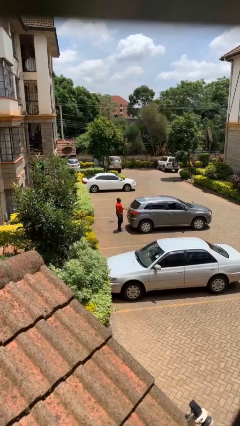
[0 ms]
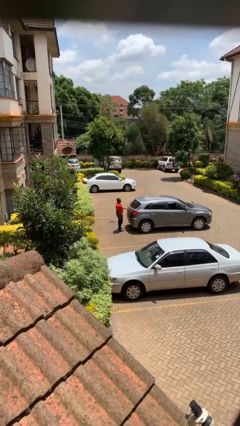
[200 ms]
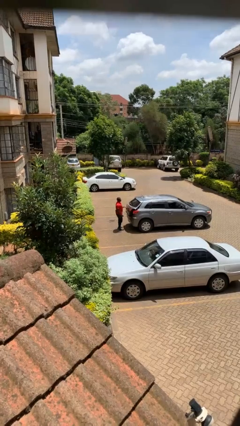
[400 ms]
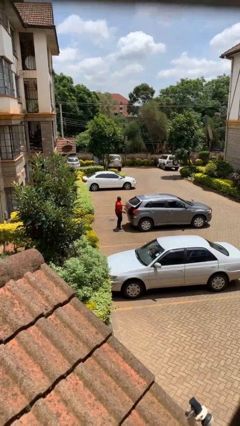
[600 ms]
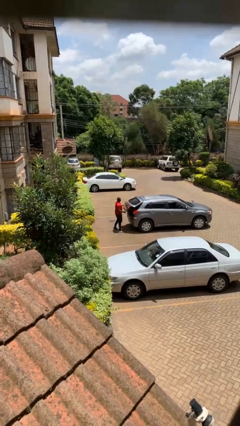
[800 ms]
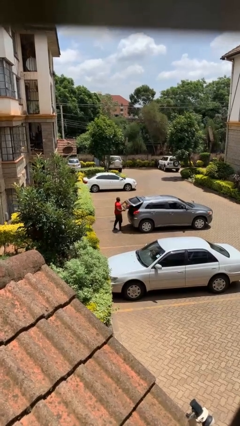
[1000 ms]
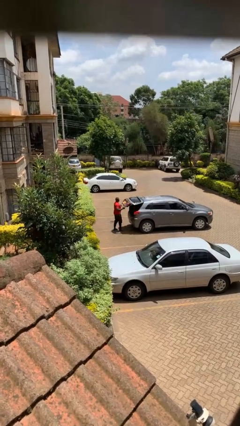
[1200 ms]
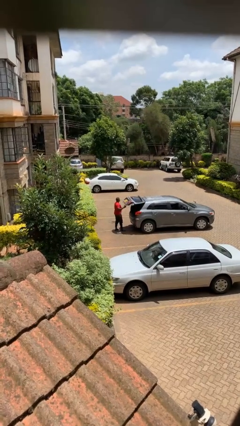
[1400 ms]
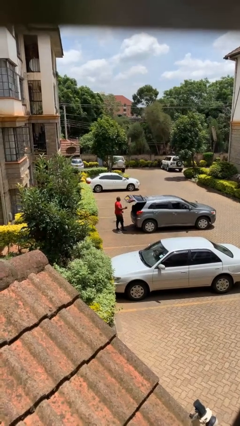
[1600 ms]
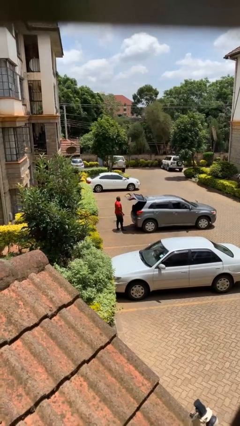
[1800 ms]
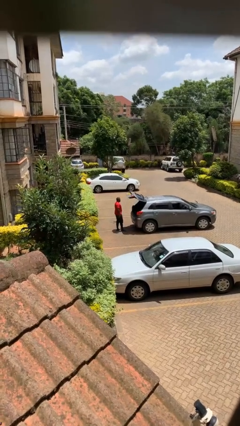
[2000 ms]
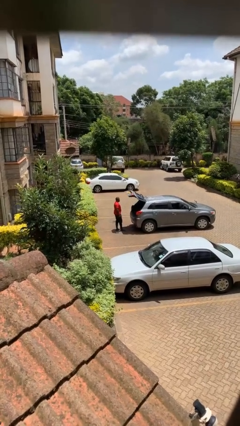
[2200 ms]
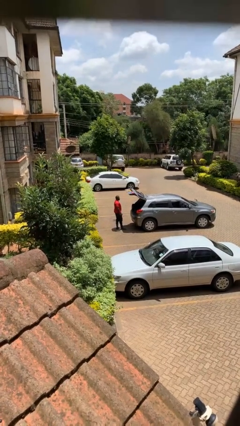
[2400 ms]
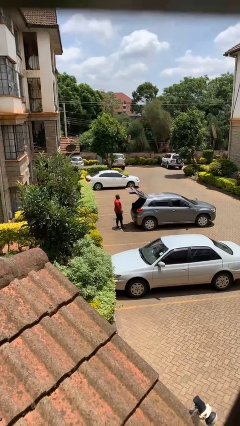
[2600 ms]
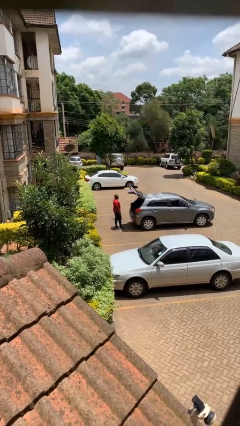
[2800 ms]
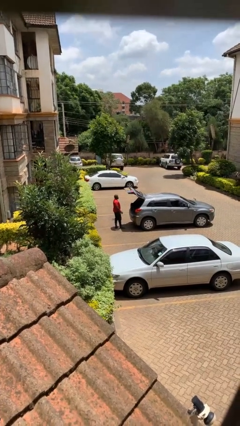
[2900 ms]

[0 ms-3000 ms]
person opens car trunk

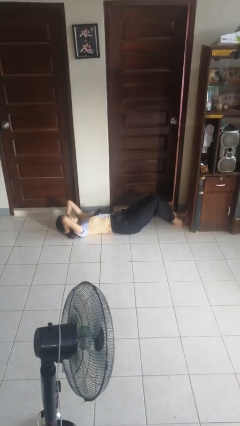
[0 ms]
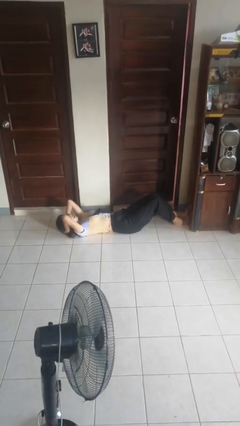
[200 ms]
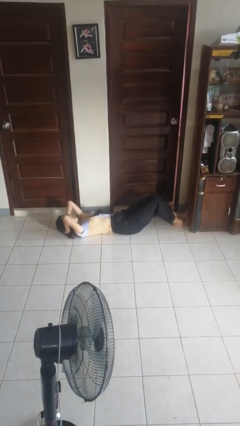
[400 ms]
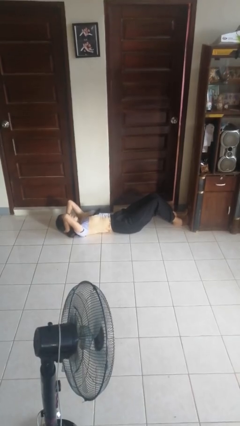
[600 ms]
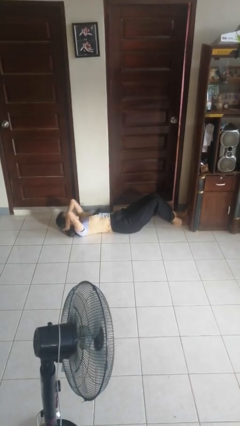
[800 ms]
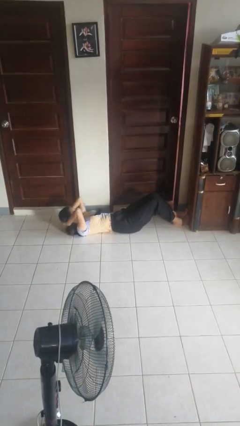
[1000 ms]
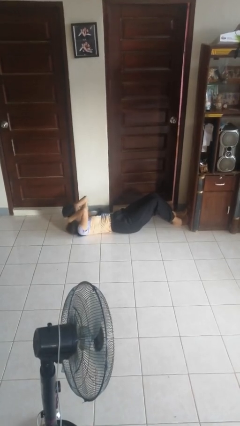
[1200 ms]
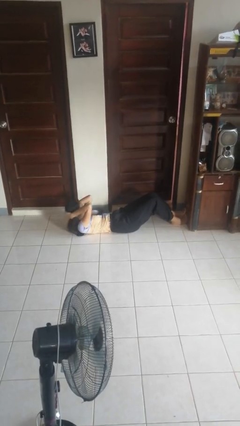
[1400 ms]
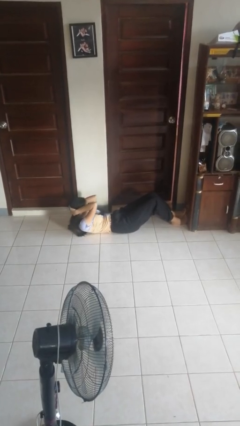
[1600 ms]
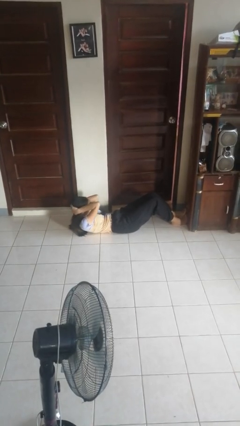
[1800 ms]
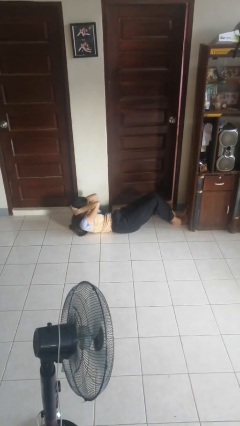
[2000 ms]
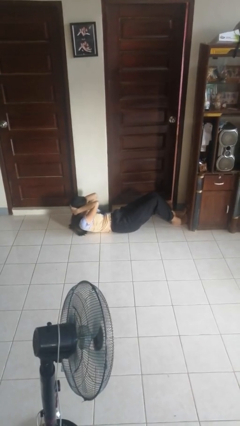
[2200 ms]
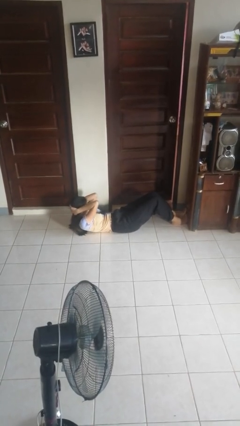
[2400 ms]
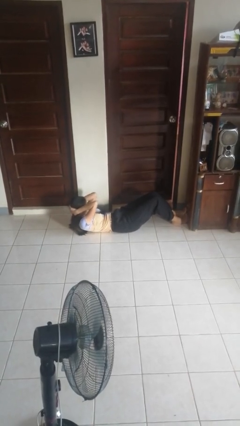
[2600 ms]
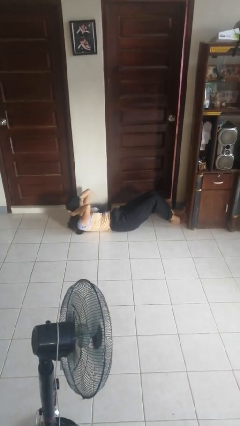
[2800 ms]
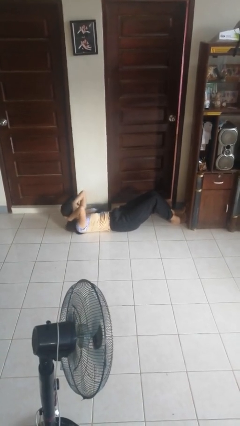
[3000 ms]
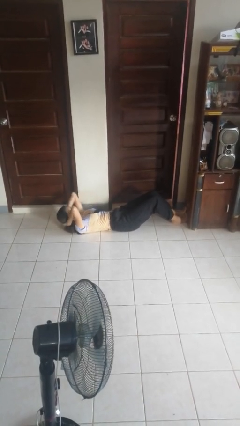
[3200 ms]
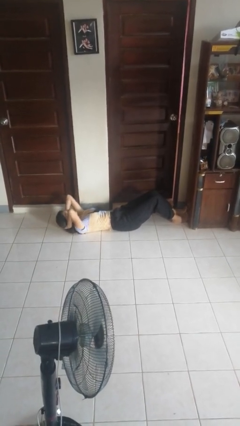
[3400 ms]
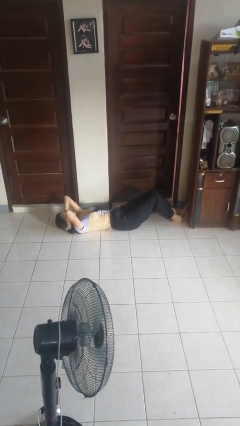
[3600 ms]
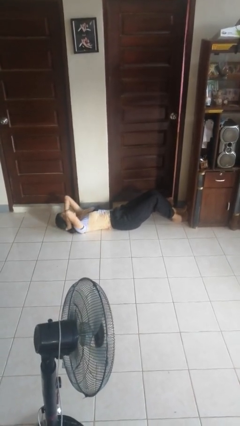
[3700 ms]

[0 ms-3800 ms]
person exercises with situp

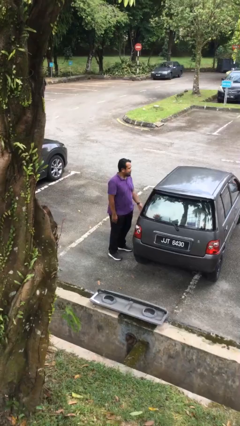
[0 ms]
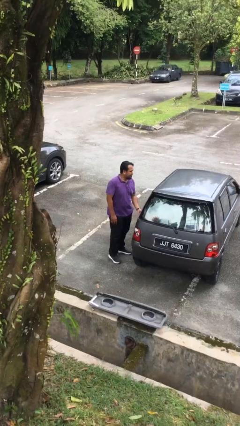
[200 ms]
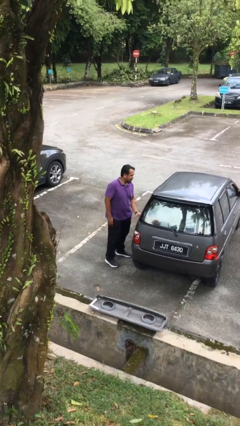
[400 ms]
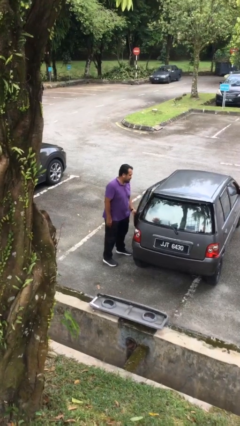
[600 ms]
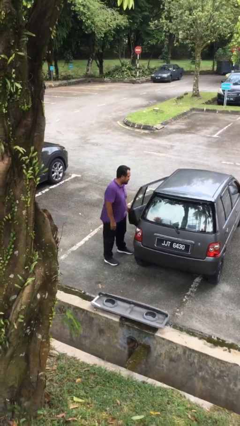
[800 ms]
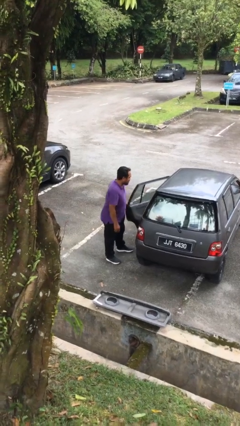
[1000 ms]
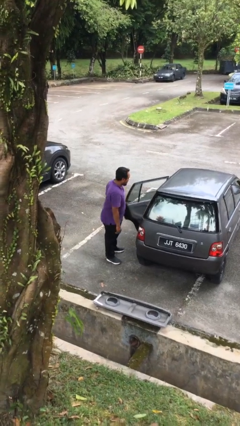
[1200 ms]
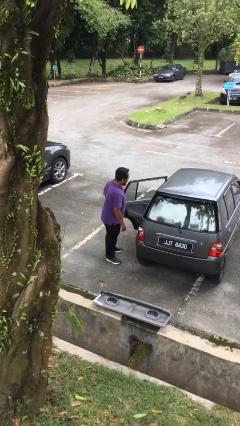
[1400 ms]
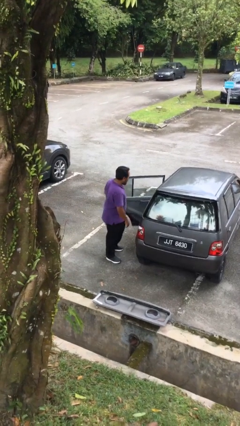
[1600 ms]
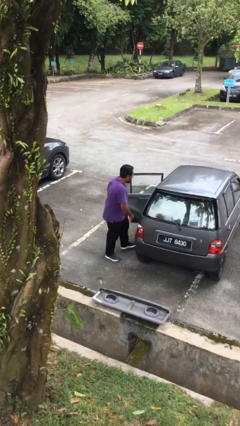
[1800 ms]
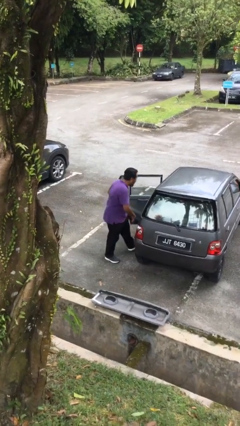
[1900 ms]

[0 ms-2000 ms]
person opens car door

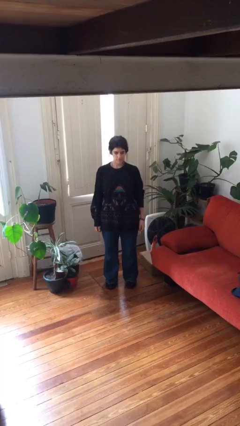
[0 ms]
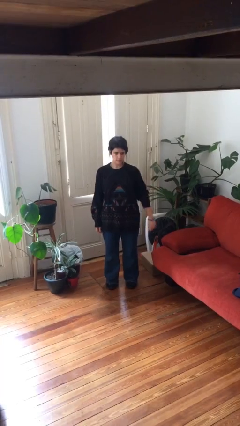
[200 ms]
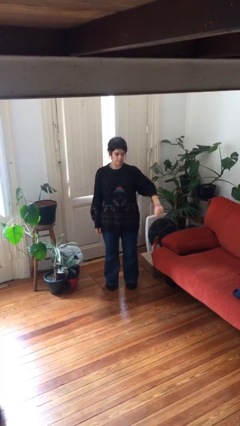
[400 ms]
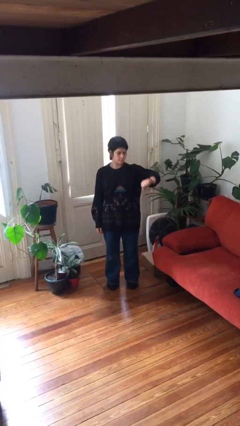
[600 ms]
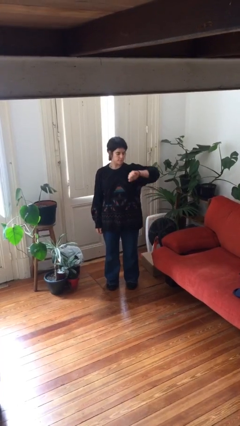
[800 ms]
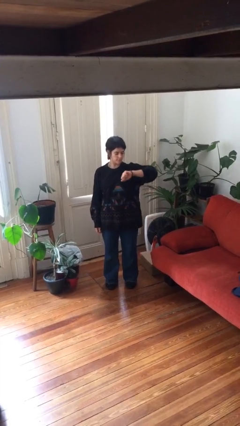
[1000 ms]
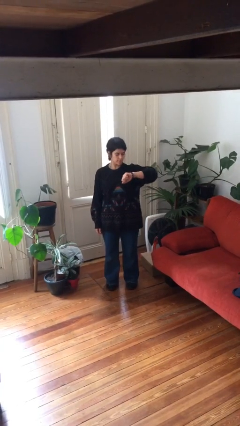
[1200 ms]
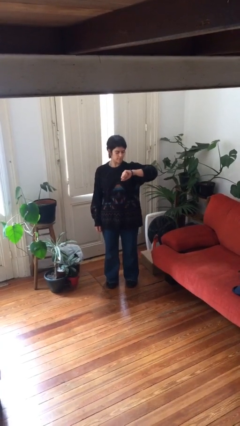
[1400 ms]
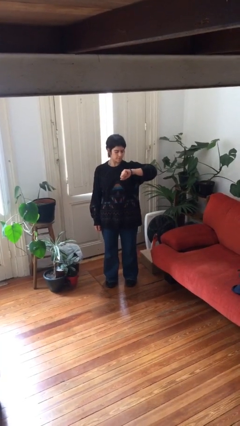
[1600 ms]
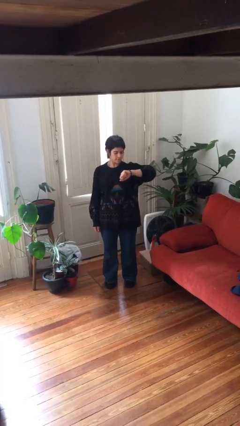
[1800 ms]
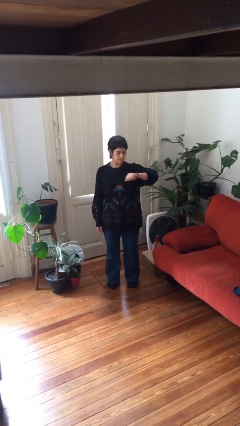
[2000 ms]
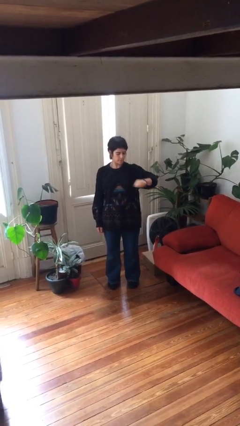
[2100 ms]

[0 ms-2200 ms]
person looks at wristwatch

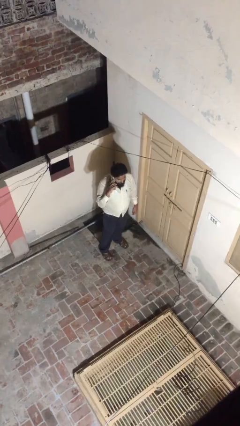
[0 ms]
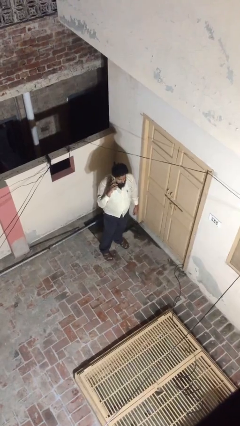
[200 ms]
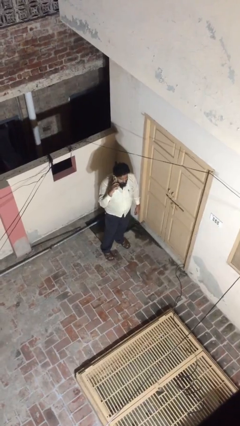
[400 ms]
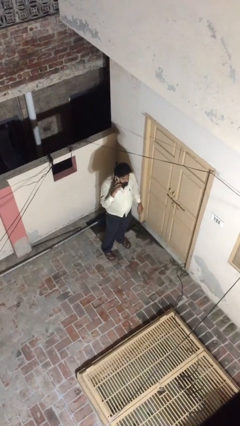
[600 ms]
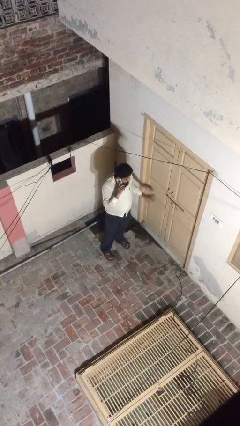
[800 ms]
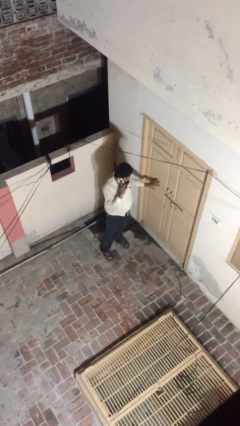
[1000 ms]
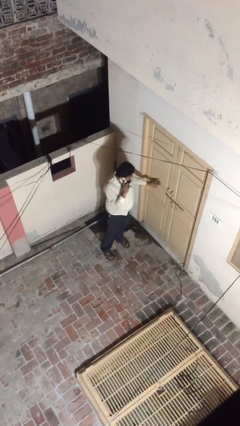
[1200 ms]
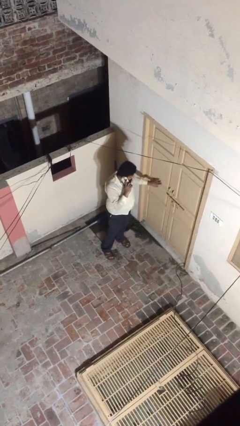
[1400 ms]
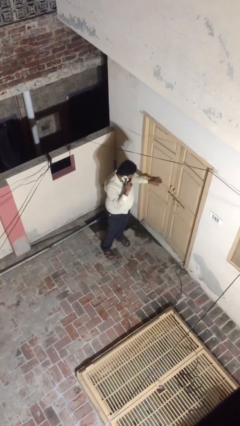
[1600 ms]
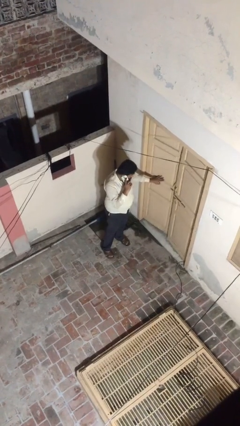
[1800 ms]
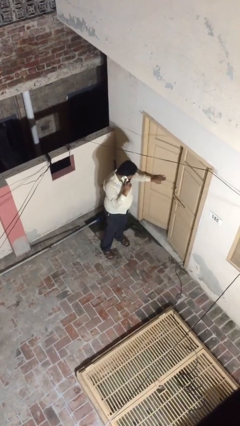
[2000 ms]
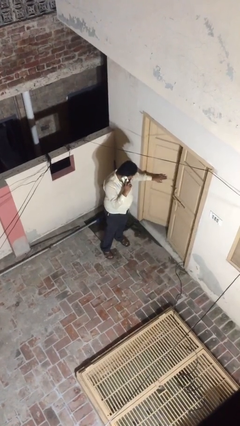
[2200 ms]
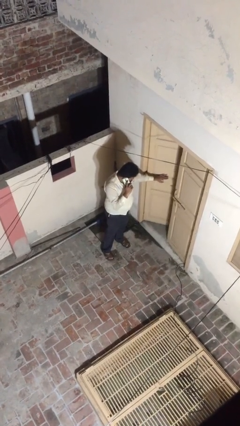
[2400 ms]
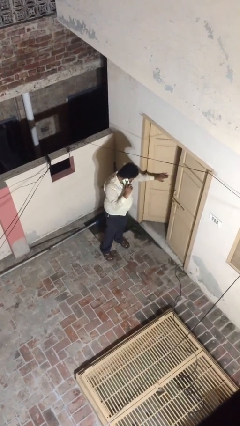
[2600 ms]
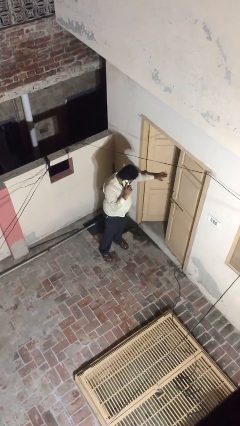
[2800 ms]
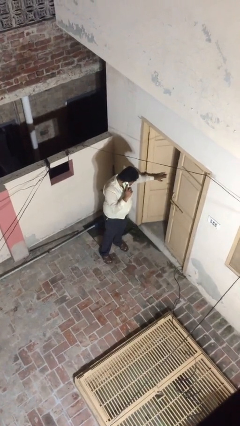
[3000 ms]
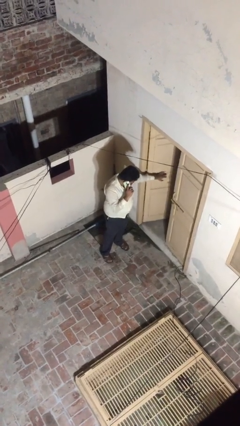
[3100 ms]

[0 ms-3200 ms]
person opens facility door

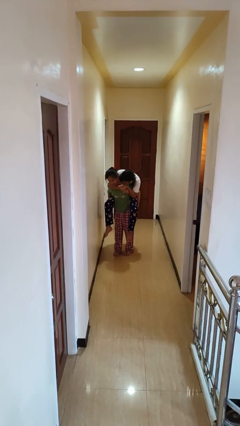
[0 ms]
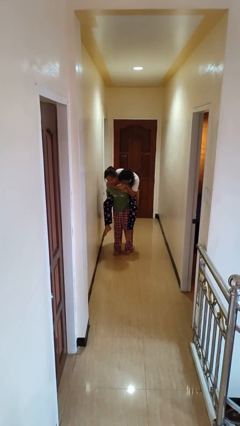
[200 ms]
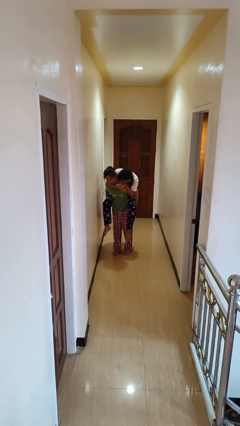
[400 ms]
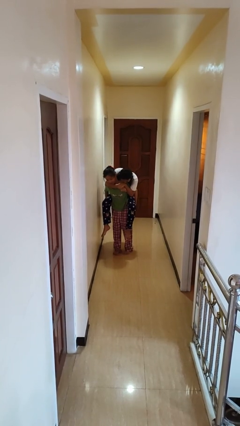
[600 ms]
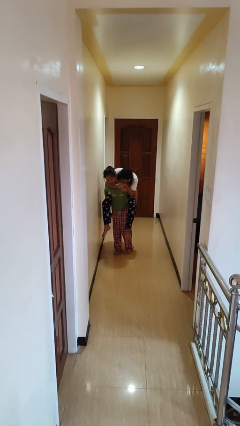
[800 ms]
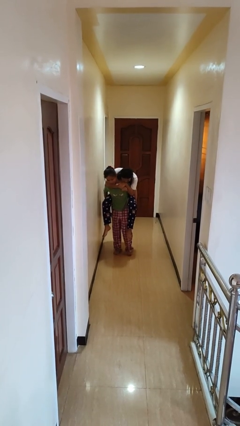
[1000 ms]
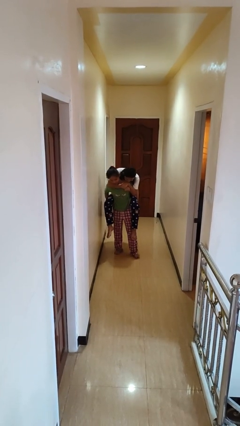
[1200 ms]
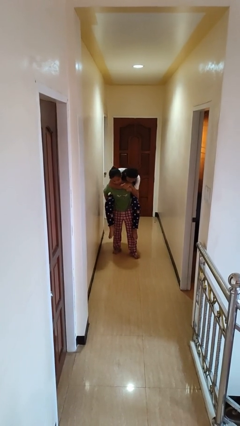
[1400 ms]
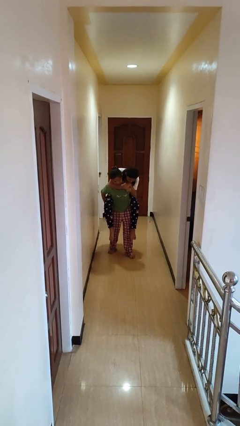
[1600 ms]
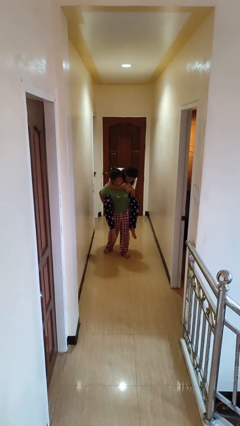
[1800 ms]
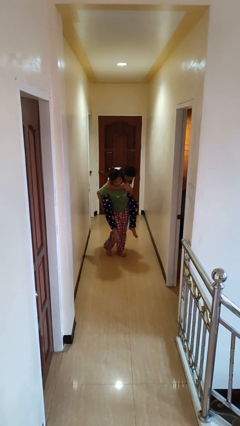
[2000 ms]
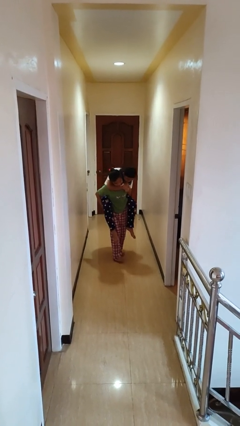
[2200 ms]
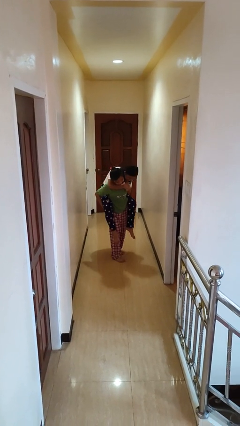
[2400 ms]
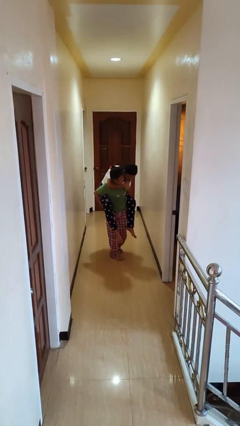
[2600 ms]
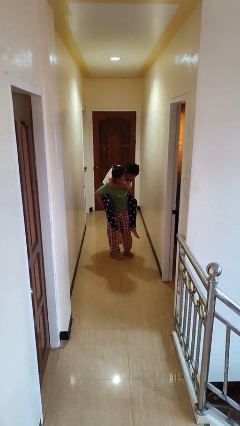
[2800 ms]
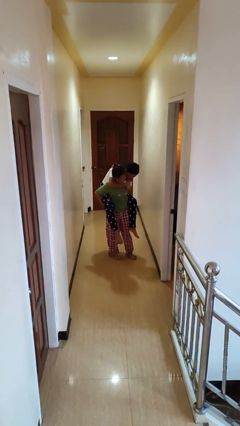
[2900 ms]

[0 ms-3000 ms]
person carries person on back
